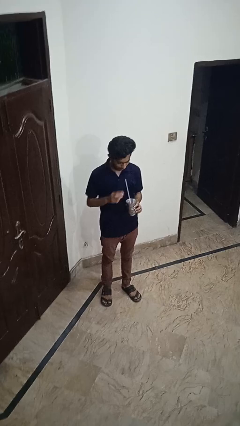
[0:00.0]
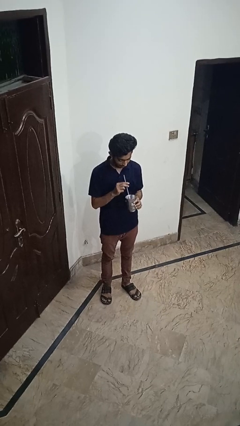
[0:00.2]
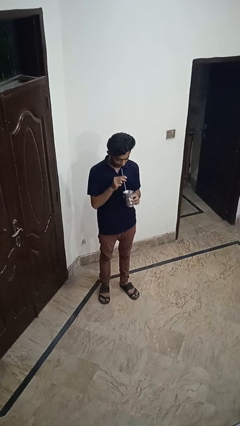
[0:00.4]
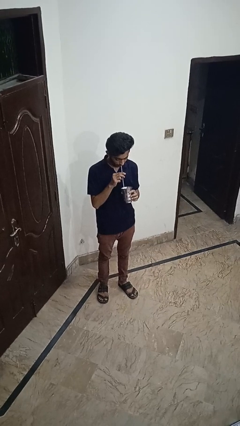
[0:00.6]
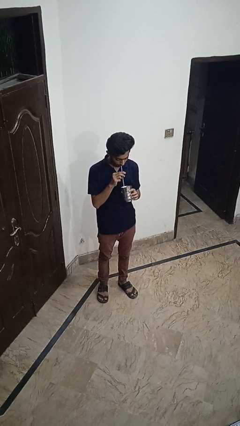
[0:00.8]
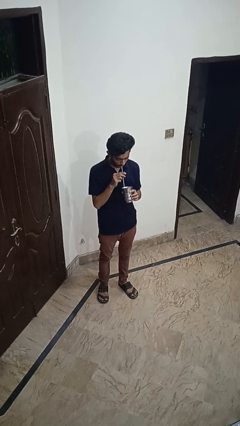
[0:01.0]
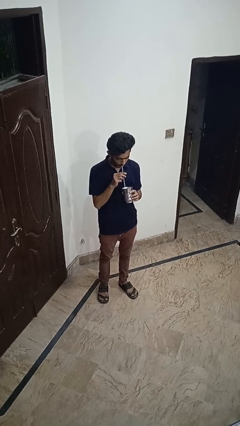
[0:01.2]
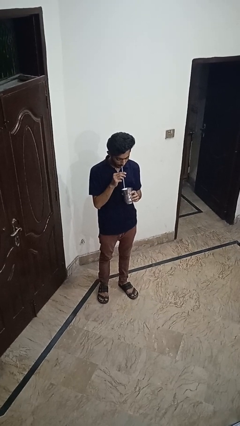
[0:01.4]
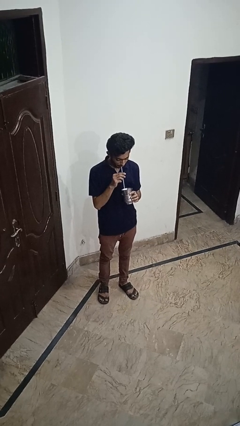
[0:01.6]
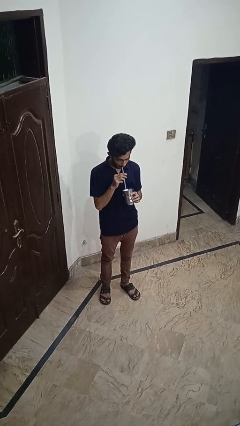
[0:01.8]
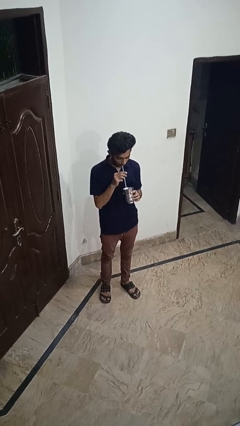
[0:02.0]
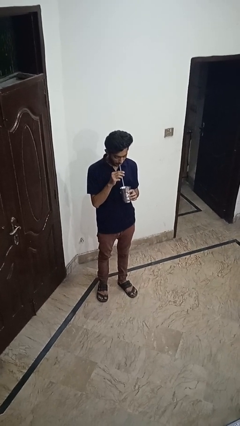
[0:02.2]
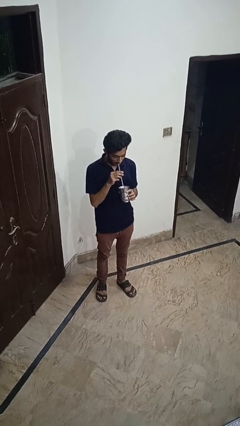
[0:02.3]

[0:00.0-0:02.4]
person drinks from straw

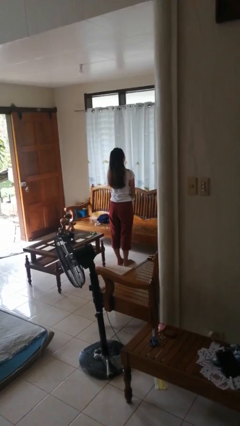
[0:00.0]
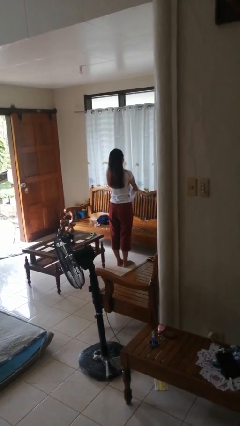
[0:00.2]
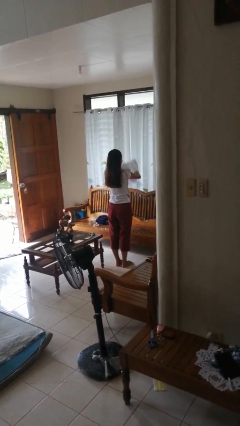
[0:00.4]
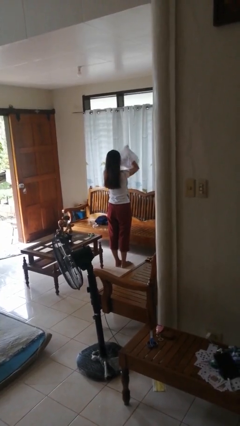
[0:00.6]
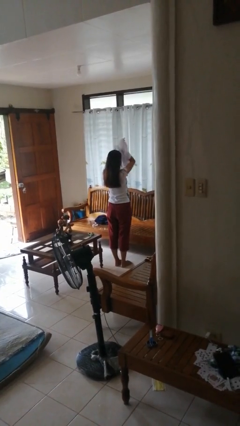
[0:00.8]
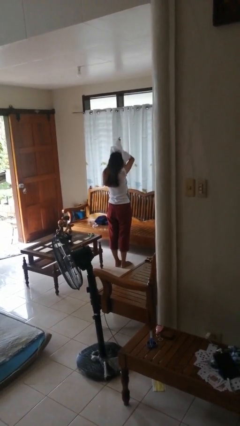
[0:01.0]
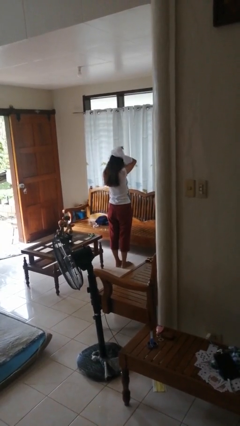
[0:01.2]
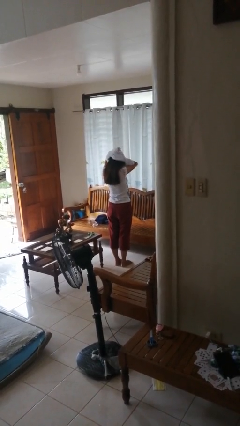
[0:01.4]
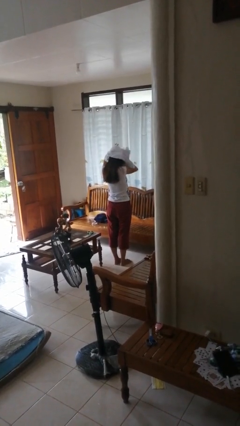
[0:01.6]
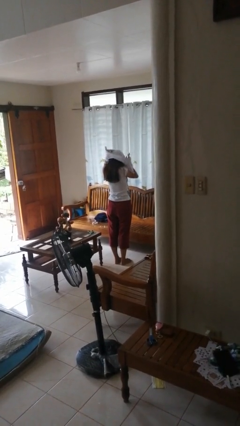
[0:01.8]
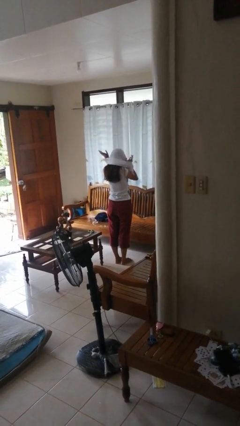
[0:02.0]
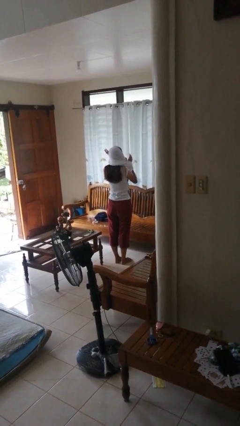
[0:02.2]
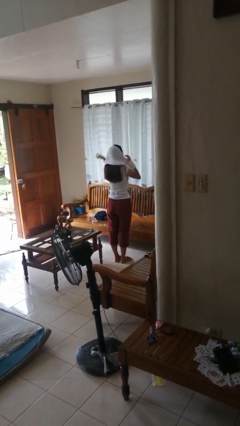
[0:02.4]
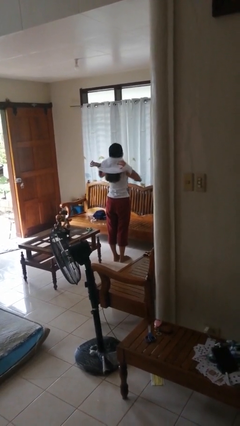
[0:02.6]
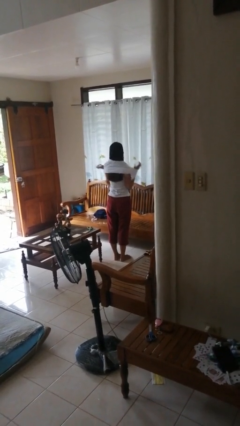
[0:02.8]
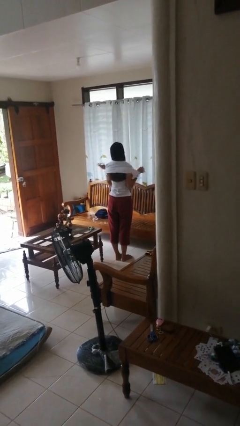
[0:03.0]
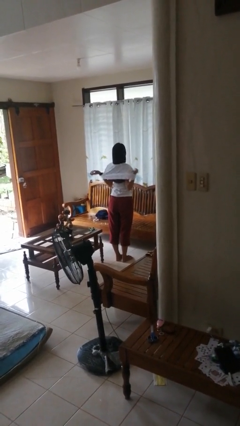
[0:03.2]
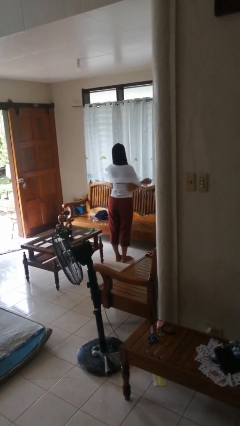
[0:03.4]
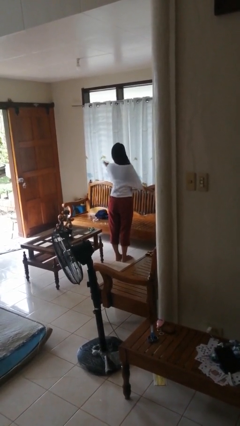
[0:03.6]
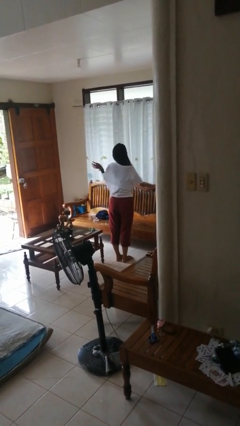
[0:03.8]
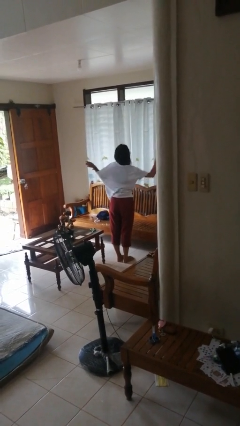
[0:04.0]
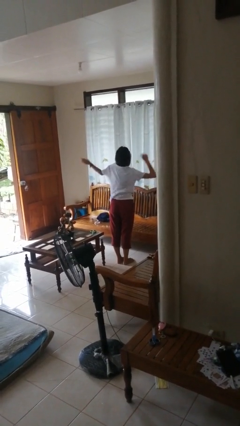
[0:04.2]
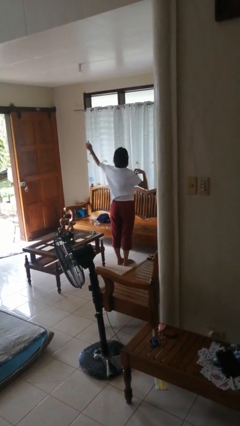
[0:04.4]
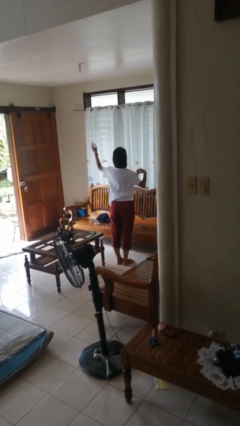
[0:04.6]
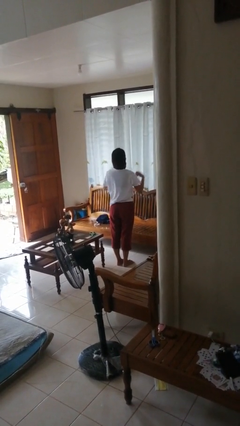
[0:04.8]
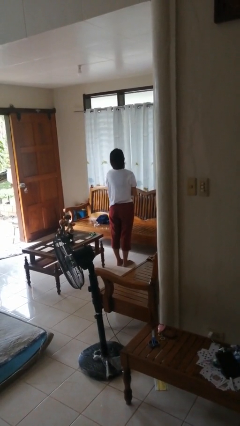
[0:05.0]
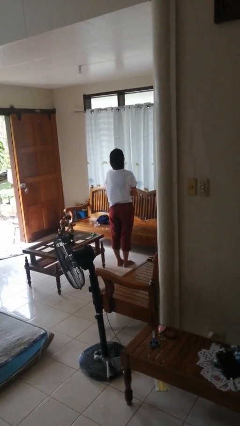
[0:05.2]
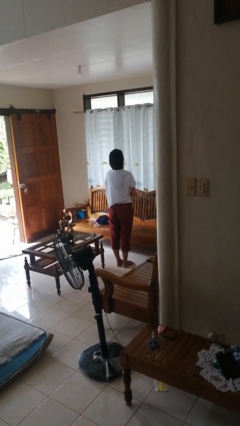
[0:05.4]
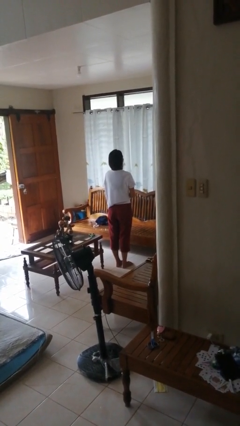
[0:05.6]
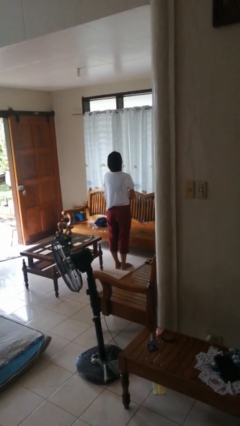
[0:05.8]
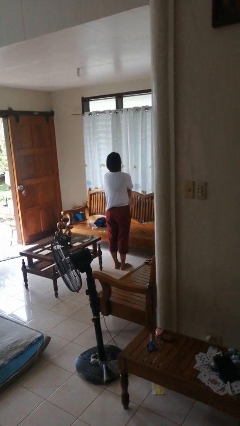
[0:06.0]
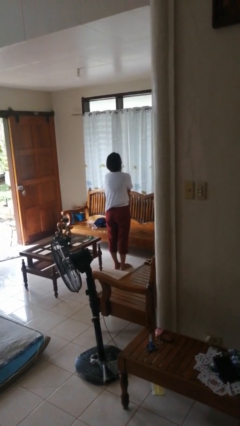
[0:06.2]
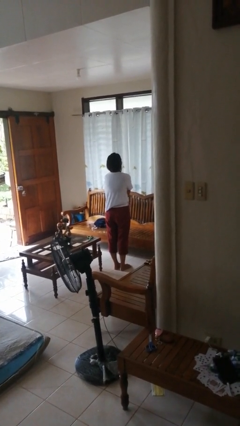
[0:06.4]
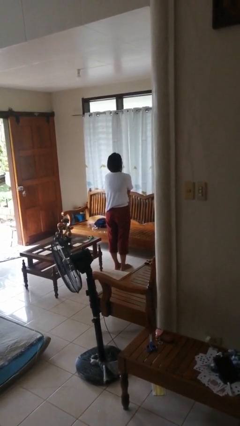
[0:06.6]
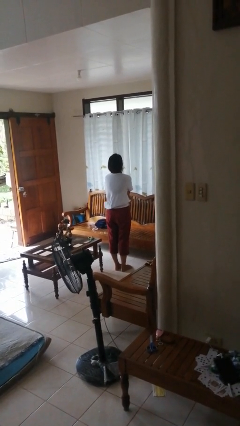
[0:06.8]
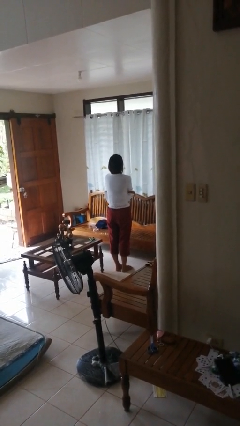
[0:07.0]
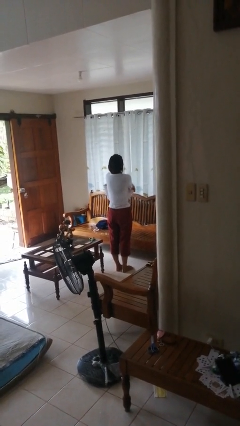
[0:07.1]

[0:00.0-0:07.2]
person puts on shirt

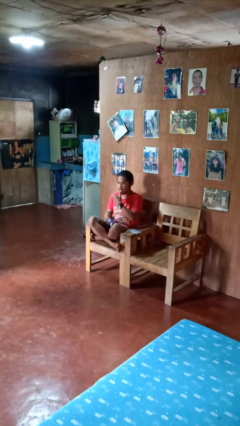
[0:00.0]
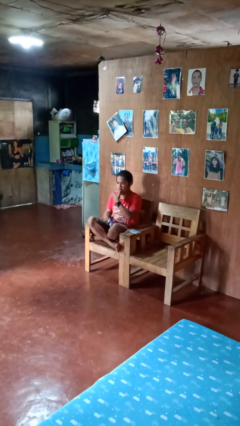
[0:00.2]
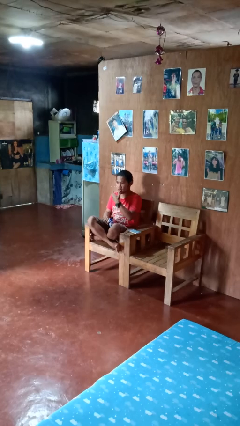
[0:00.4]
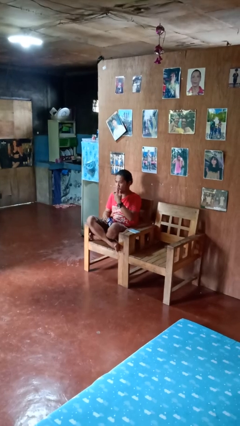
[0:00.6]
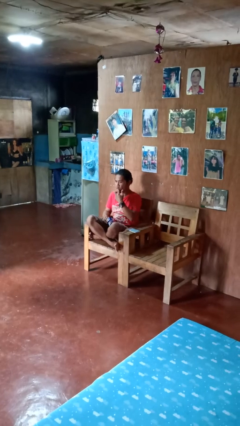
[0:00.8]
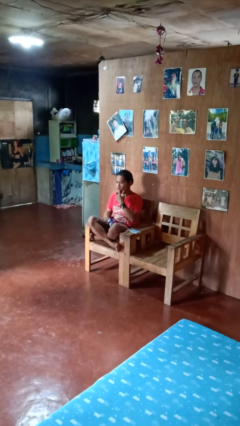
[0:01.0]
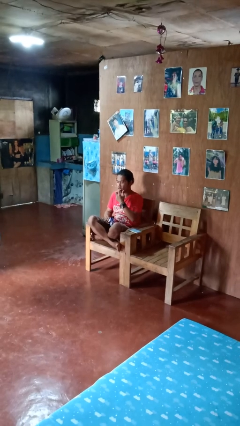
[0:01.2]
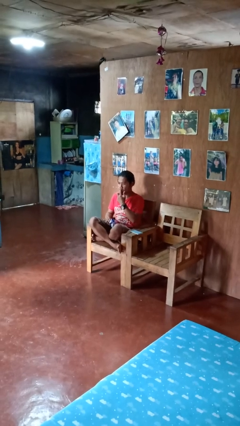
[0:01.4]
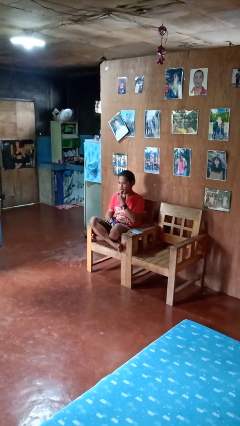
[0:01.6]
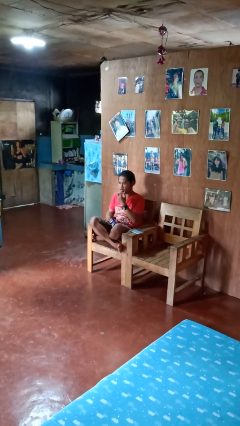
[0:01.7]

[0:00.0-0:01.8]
person licks fingers

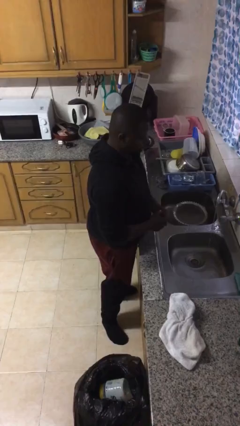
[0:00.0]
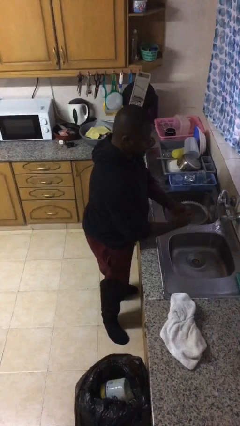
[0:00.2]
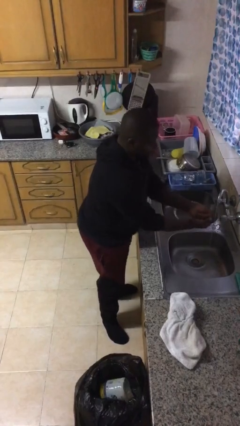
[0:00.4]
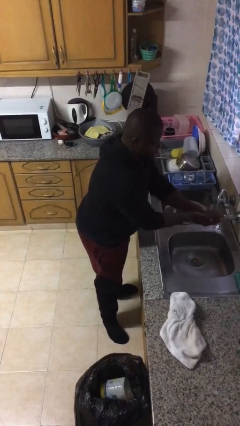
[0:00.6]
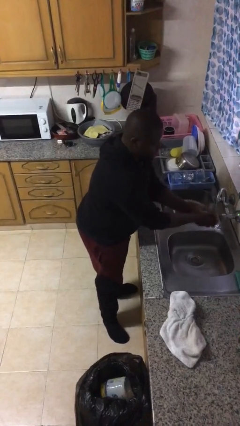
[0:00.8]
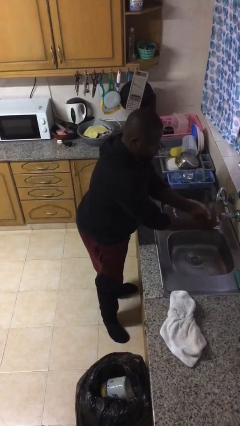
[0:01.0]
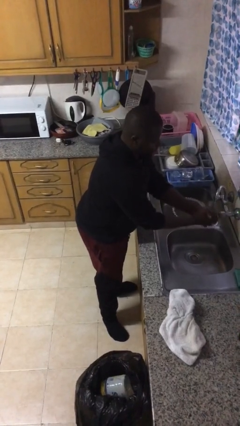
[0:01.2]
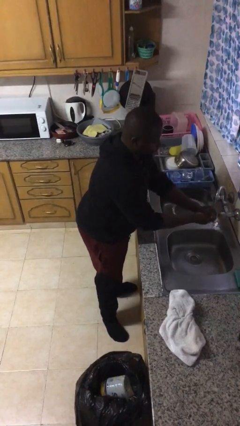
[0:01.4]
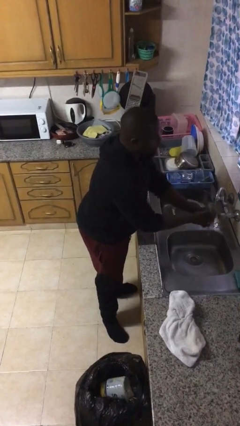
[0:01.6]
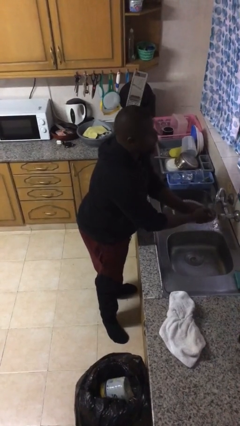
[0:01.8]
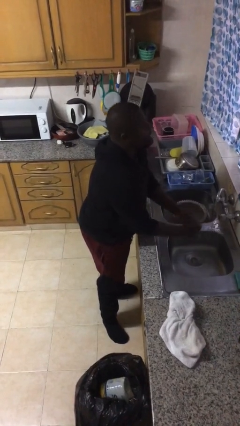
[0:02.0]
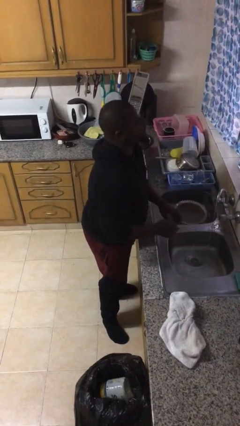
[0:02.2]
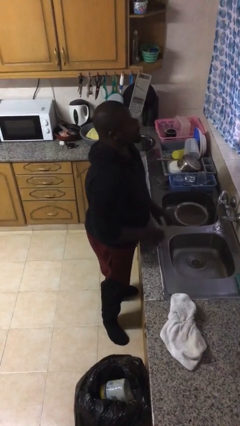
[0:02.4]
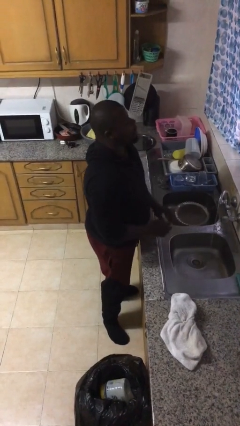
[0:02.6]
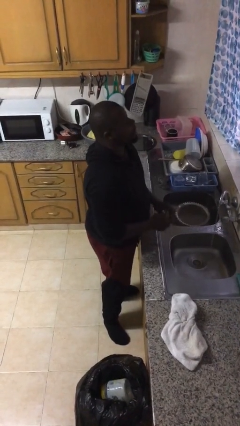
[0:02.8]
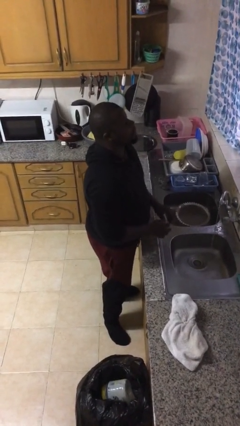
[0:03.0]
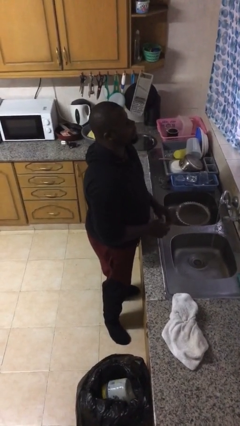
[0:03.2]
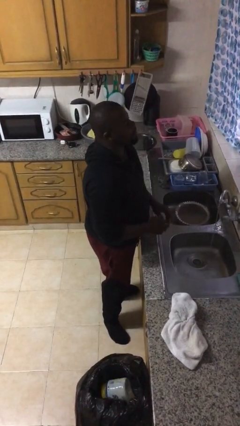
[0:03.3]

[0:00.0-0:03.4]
person washes hands

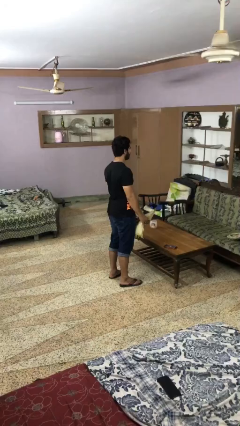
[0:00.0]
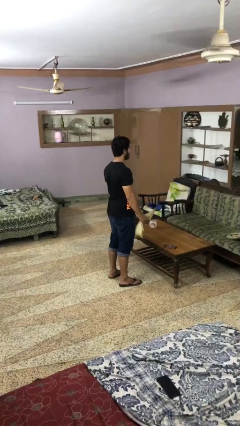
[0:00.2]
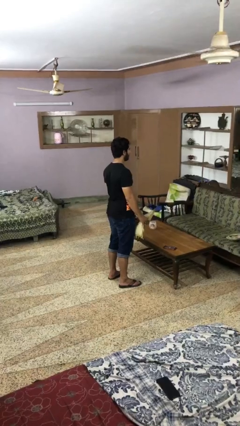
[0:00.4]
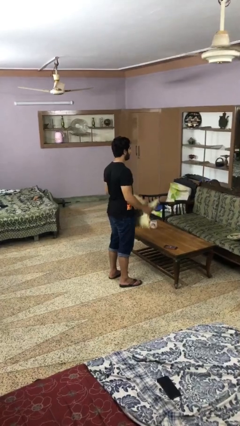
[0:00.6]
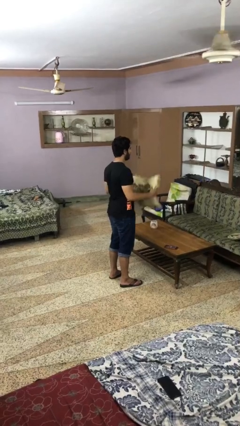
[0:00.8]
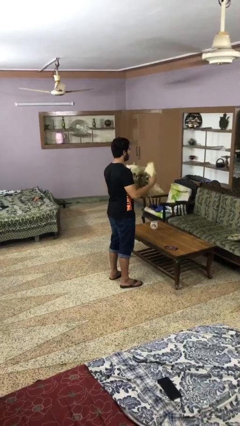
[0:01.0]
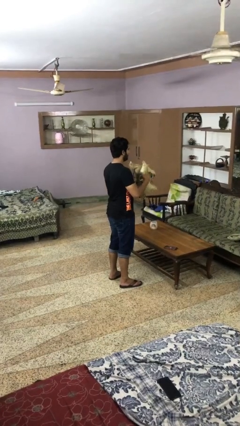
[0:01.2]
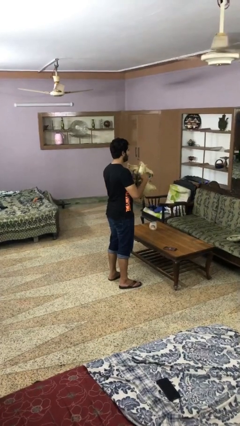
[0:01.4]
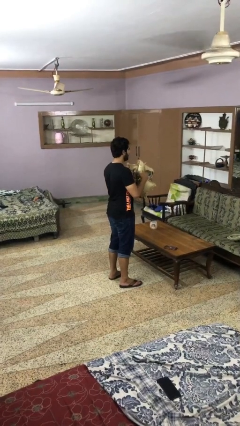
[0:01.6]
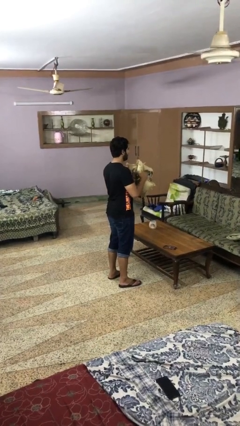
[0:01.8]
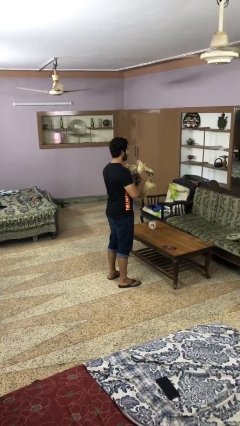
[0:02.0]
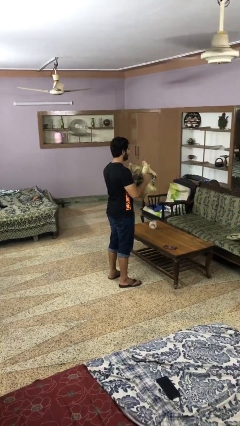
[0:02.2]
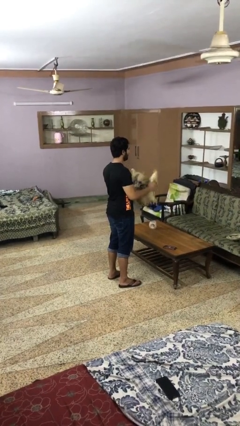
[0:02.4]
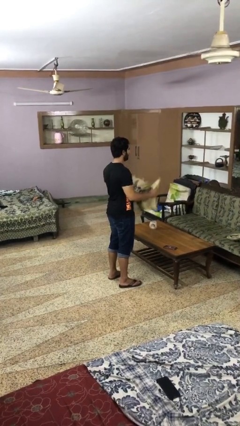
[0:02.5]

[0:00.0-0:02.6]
person squeezes object
